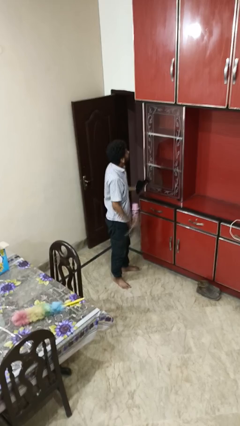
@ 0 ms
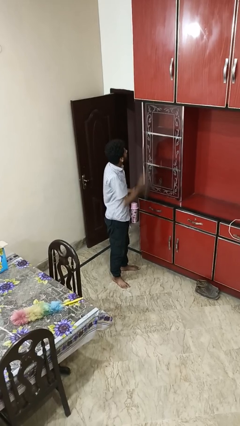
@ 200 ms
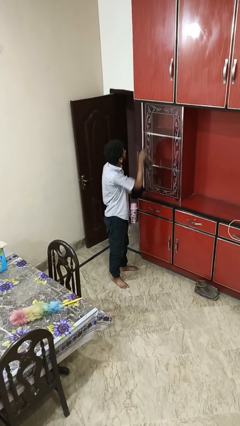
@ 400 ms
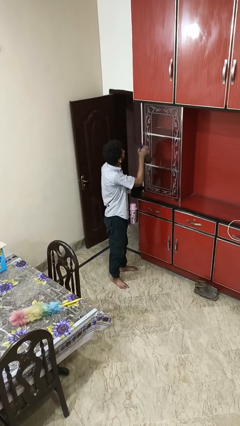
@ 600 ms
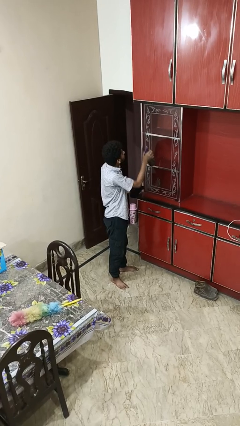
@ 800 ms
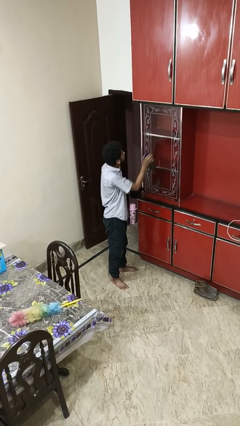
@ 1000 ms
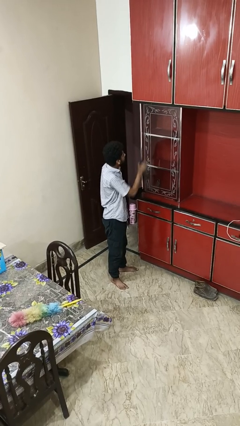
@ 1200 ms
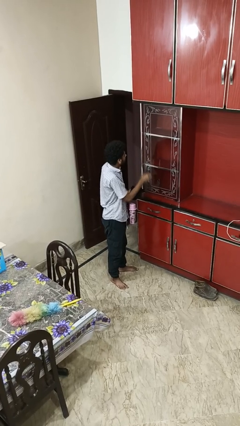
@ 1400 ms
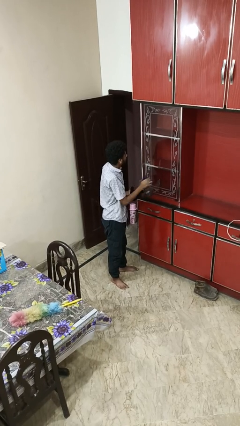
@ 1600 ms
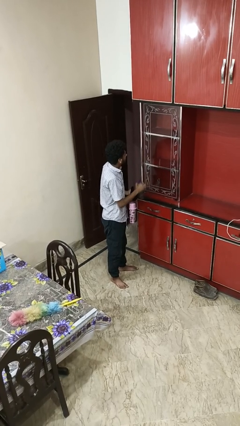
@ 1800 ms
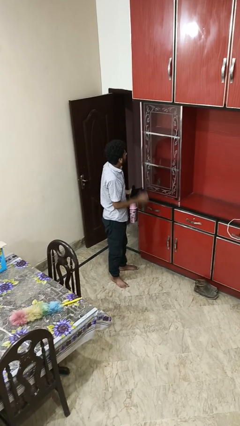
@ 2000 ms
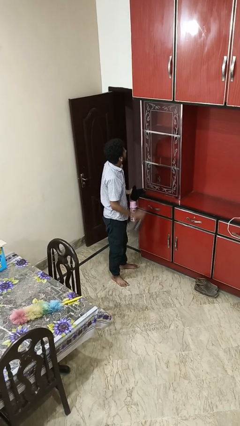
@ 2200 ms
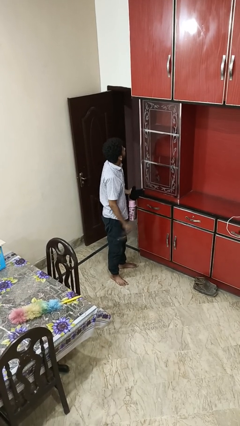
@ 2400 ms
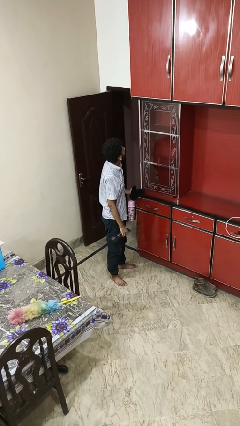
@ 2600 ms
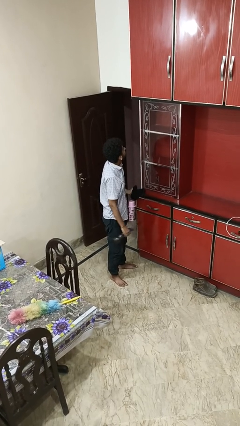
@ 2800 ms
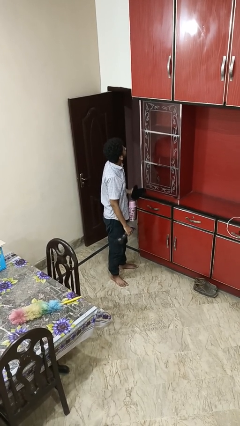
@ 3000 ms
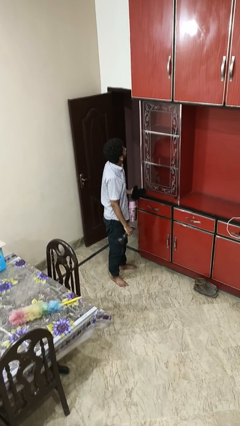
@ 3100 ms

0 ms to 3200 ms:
person sprays from bottle

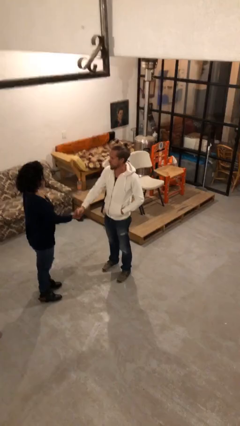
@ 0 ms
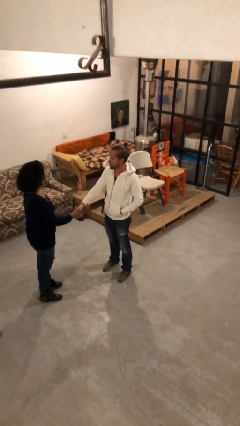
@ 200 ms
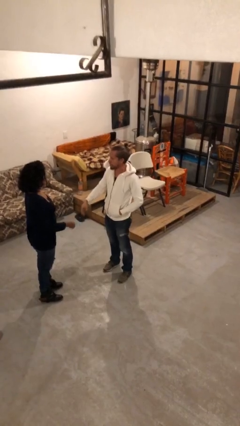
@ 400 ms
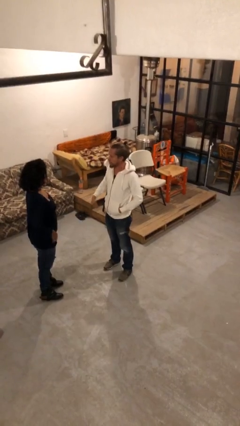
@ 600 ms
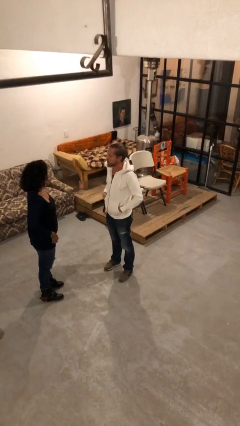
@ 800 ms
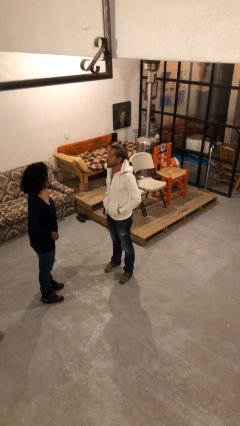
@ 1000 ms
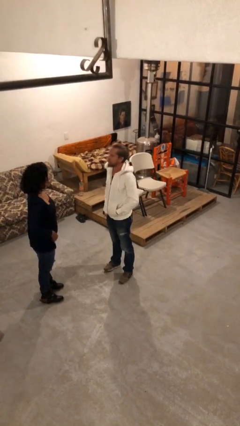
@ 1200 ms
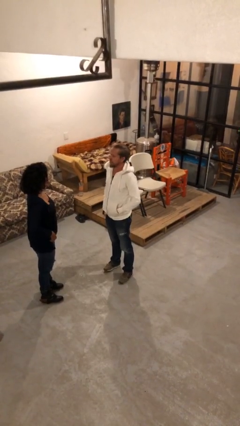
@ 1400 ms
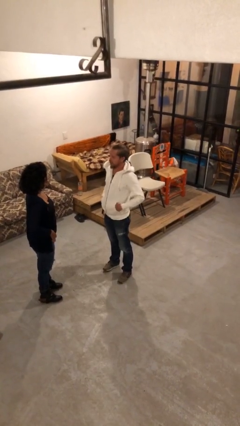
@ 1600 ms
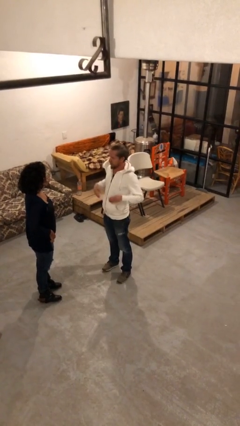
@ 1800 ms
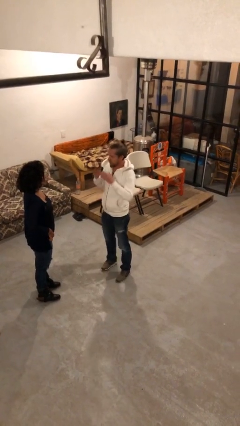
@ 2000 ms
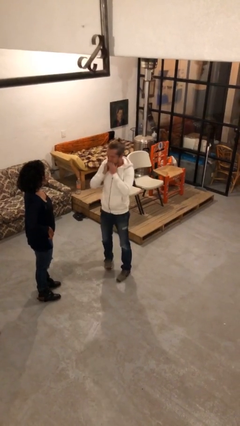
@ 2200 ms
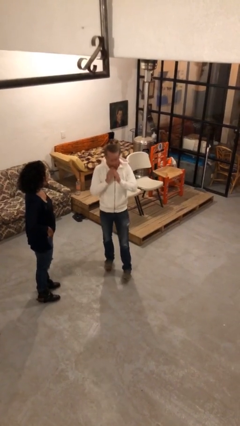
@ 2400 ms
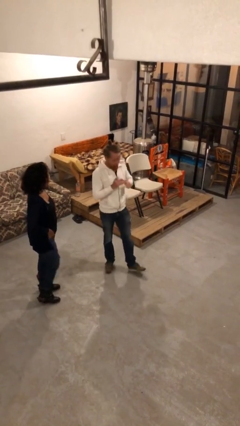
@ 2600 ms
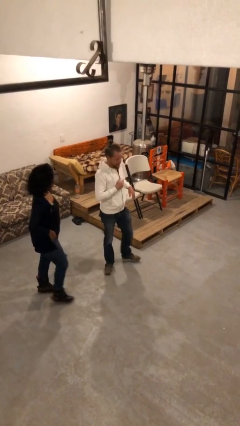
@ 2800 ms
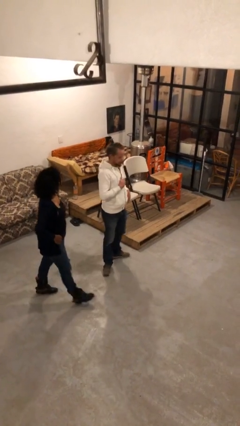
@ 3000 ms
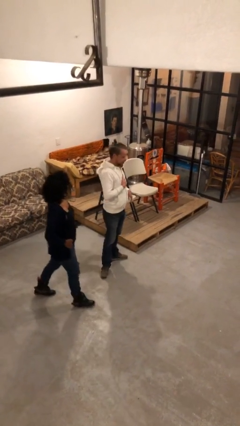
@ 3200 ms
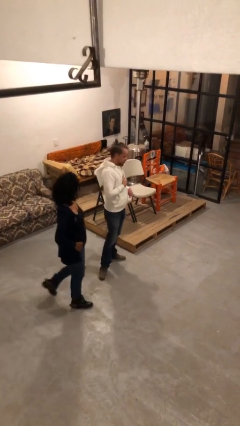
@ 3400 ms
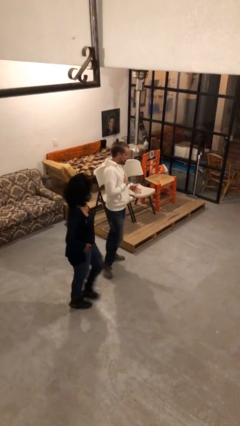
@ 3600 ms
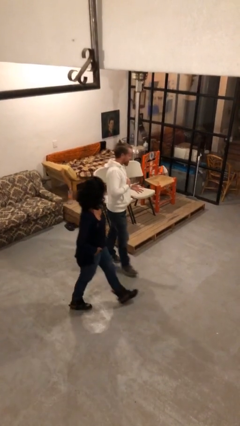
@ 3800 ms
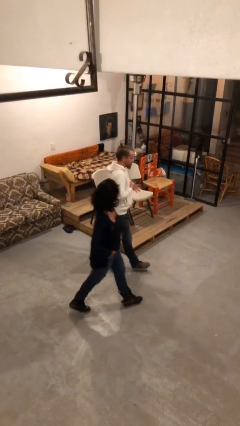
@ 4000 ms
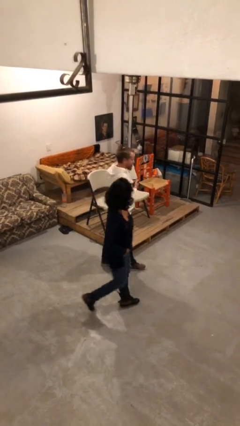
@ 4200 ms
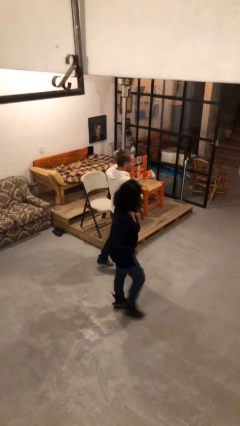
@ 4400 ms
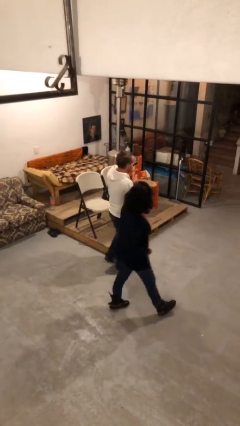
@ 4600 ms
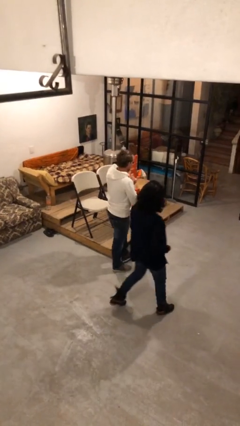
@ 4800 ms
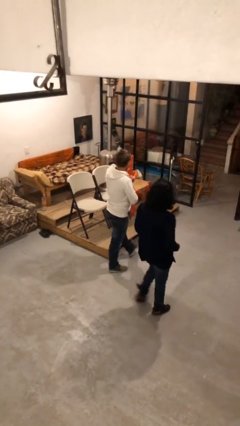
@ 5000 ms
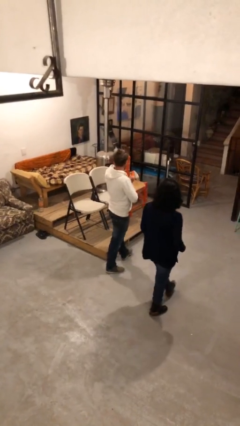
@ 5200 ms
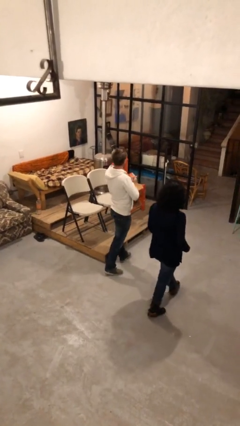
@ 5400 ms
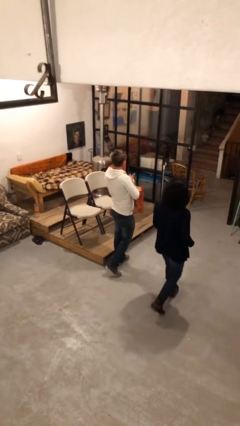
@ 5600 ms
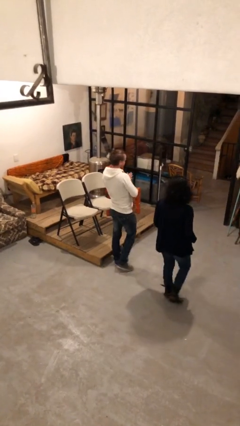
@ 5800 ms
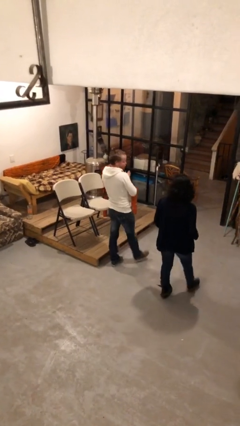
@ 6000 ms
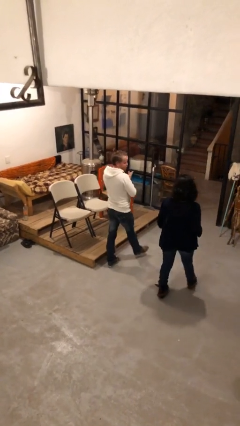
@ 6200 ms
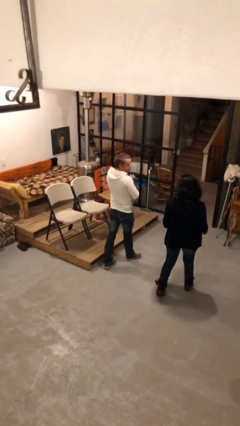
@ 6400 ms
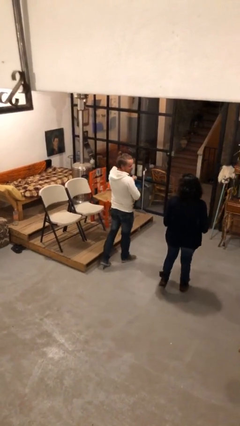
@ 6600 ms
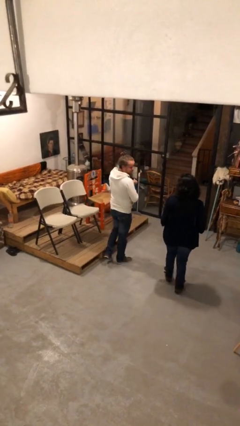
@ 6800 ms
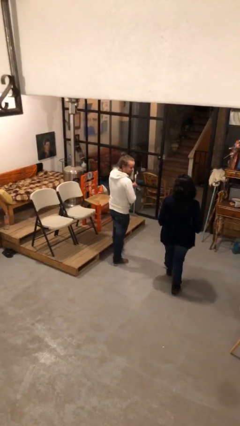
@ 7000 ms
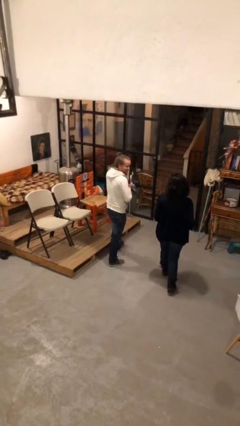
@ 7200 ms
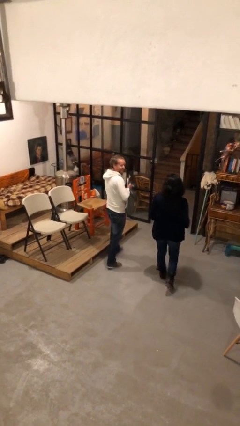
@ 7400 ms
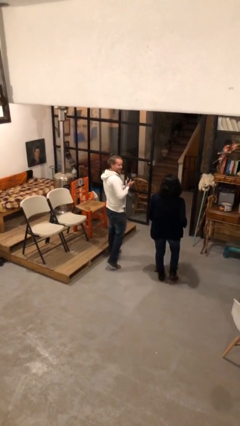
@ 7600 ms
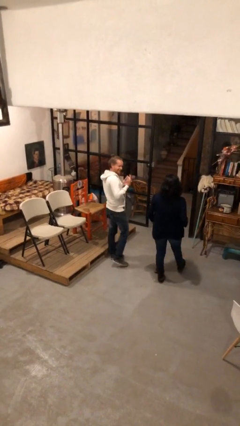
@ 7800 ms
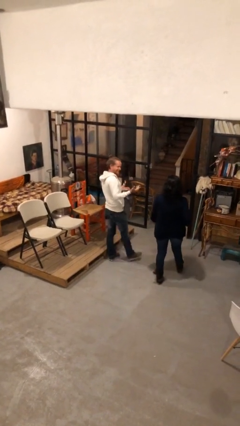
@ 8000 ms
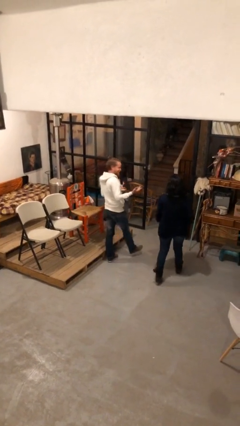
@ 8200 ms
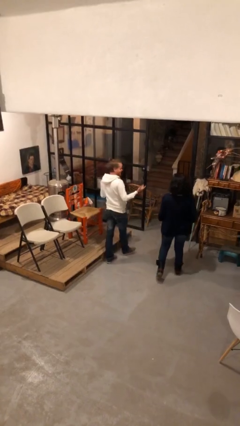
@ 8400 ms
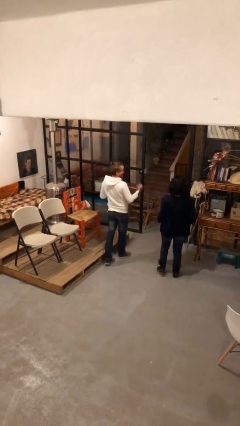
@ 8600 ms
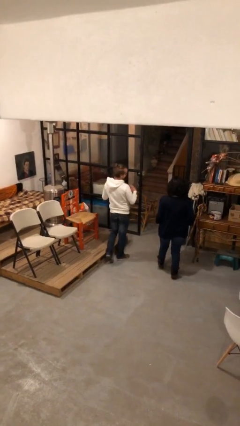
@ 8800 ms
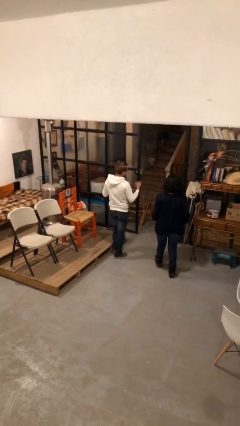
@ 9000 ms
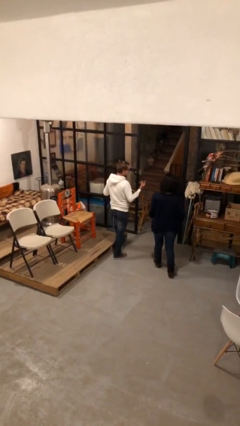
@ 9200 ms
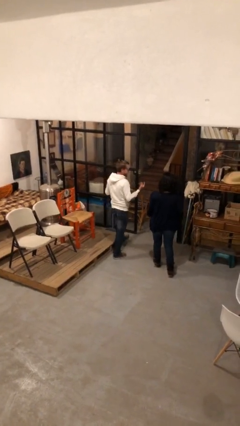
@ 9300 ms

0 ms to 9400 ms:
person talks to person

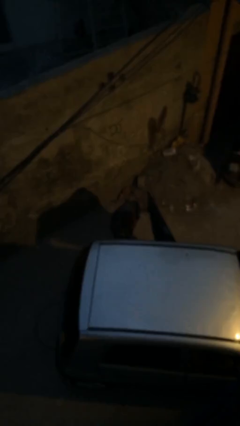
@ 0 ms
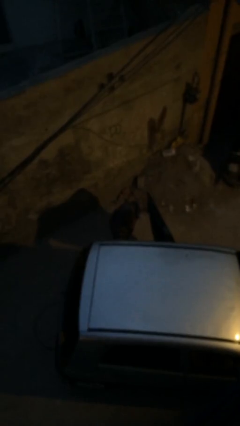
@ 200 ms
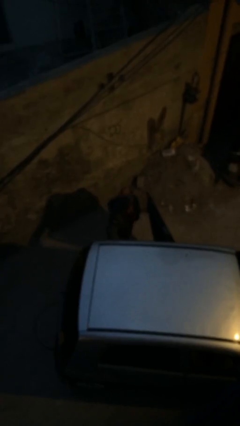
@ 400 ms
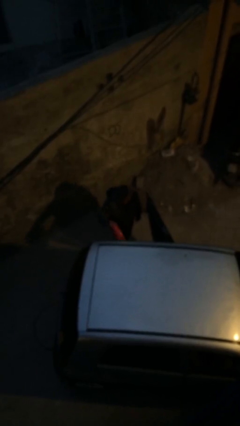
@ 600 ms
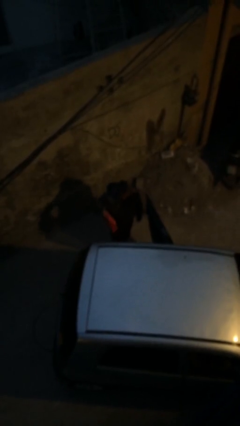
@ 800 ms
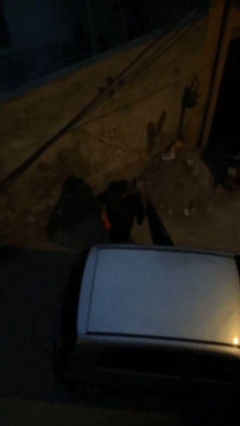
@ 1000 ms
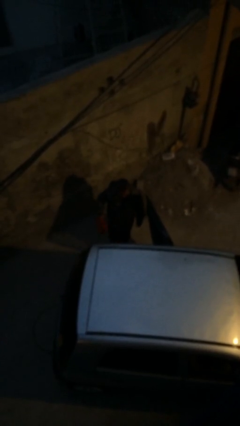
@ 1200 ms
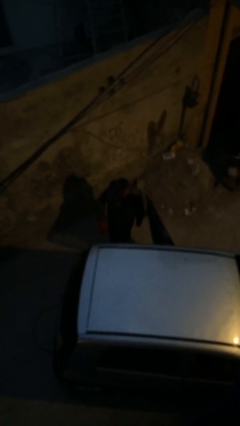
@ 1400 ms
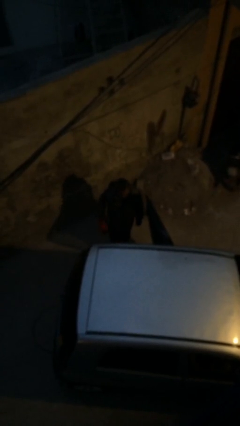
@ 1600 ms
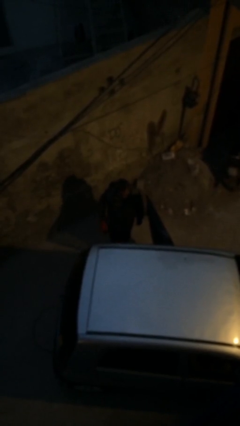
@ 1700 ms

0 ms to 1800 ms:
person unloads car

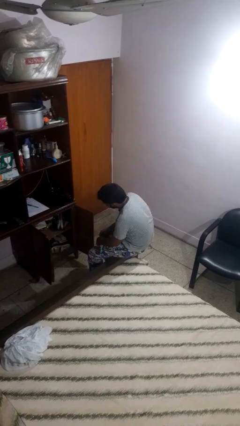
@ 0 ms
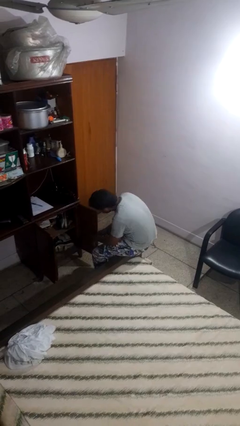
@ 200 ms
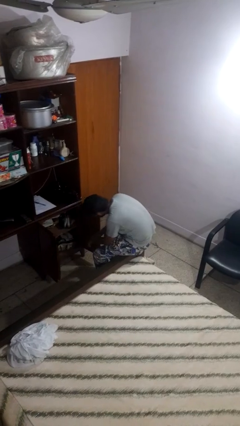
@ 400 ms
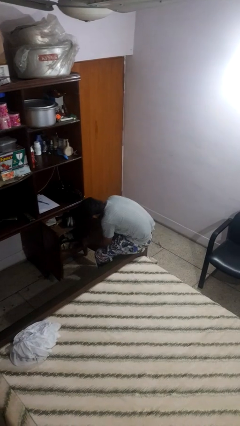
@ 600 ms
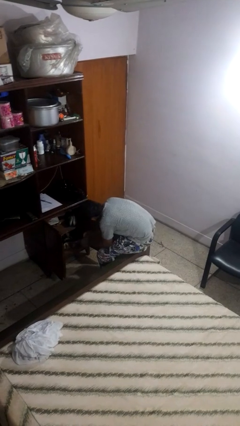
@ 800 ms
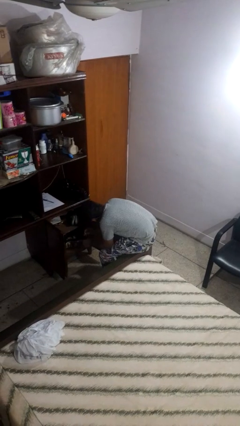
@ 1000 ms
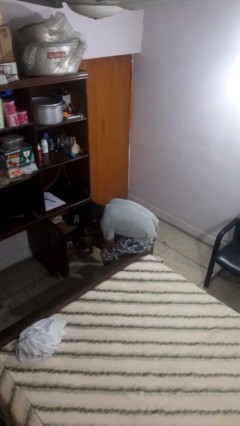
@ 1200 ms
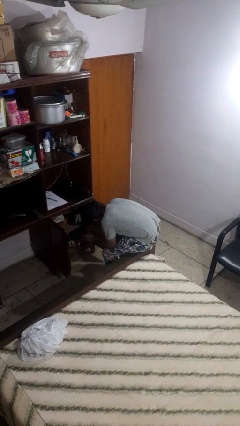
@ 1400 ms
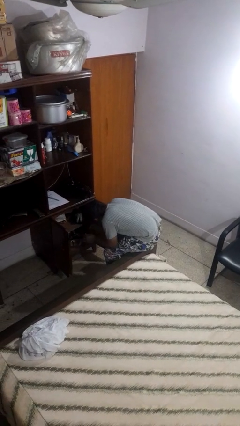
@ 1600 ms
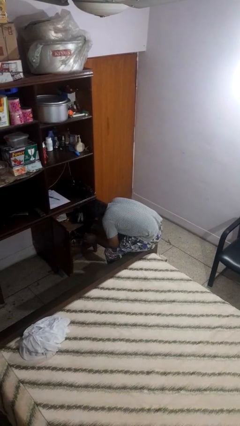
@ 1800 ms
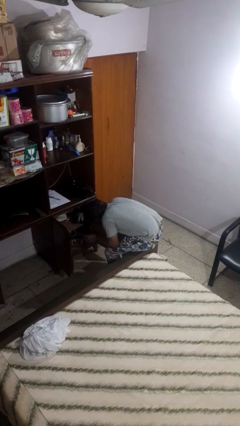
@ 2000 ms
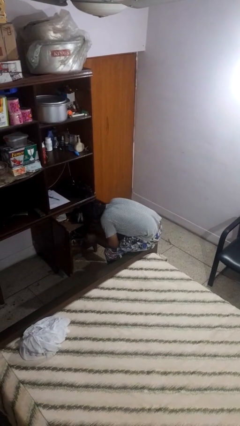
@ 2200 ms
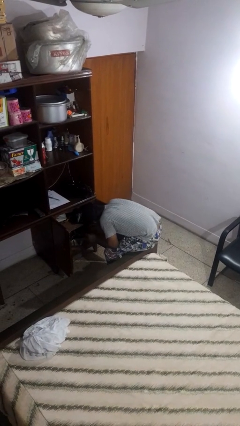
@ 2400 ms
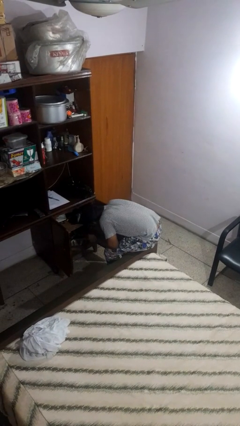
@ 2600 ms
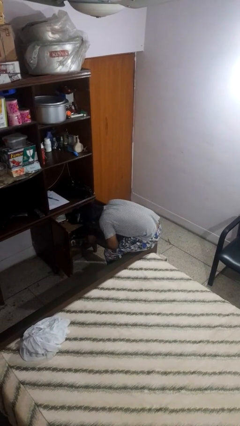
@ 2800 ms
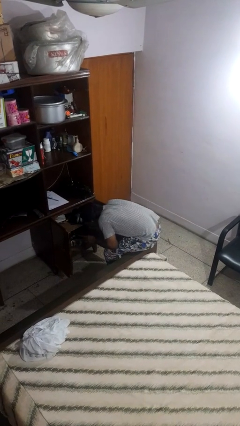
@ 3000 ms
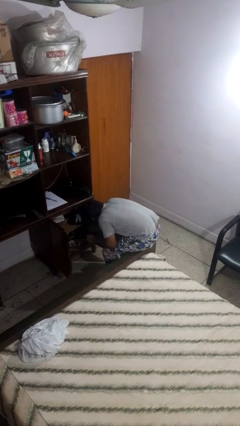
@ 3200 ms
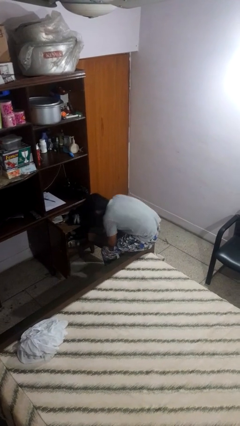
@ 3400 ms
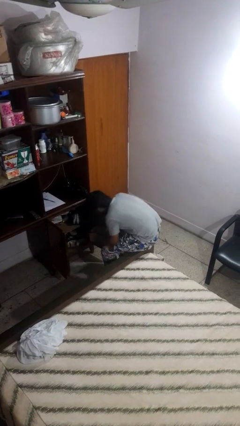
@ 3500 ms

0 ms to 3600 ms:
person searches in cabinet
